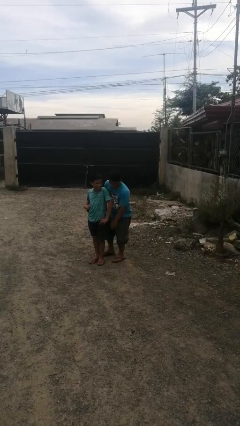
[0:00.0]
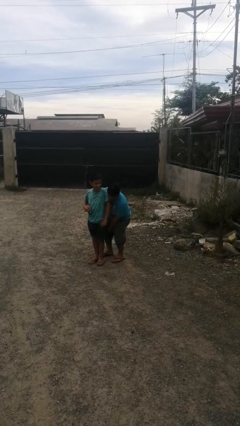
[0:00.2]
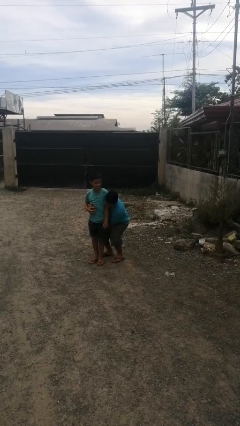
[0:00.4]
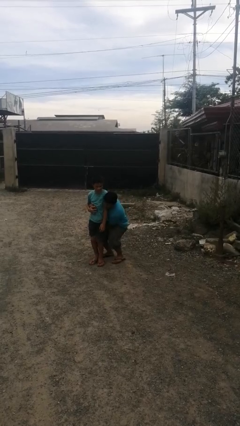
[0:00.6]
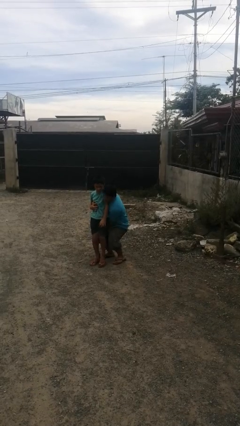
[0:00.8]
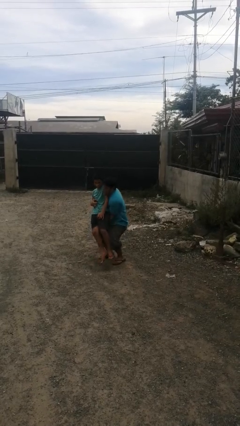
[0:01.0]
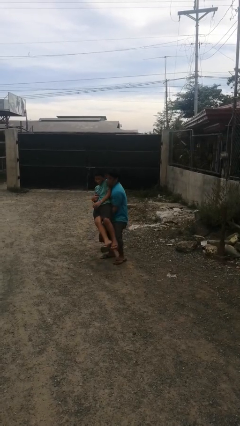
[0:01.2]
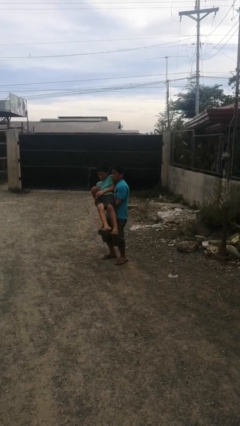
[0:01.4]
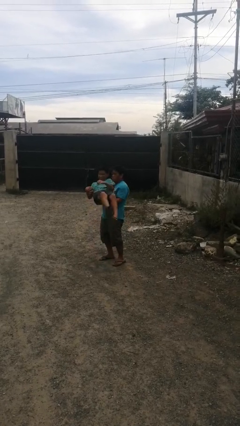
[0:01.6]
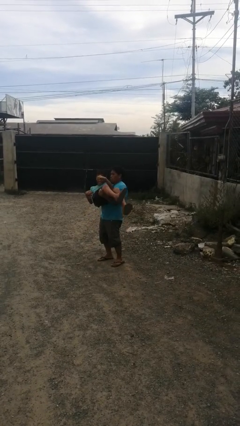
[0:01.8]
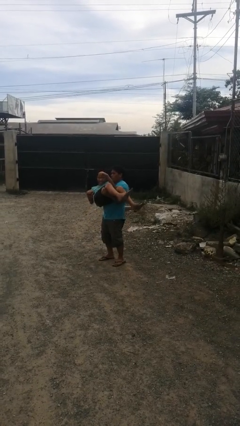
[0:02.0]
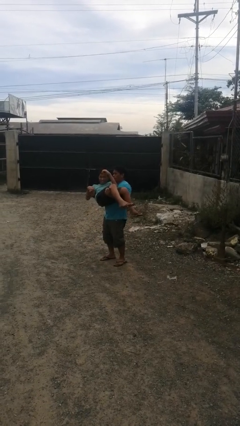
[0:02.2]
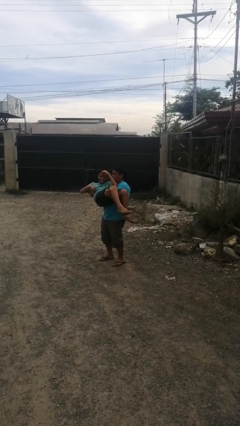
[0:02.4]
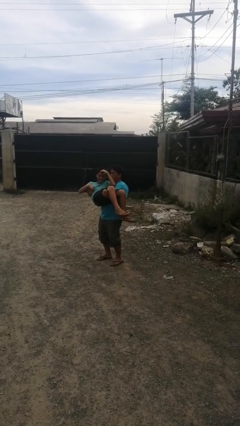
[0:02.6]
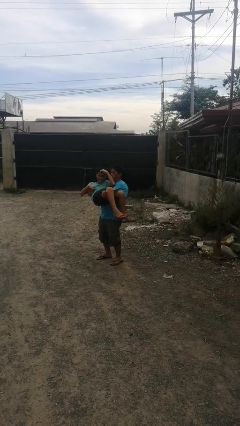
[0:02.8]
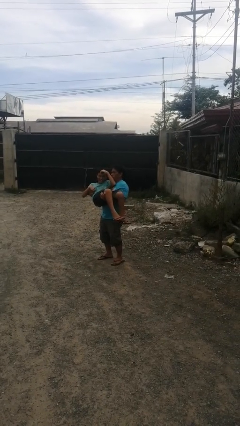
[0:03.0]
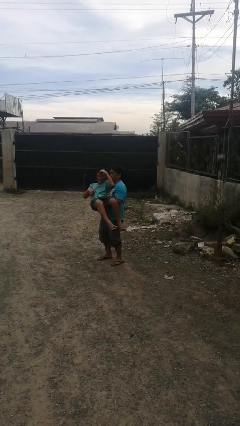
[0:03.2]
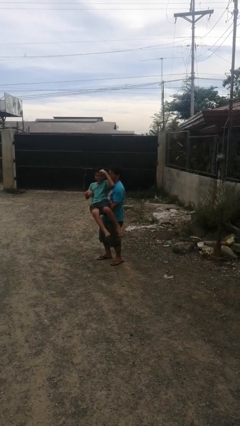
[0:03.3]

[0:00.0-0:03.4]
person picks up person

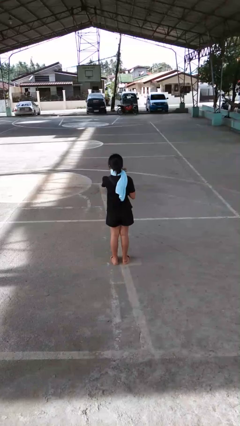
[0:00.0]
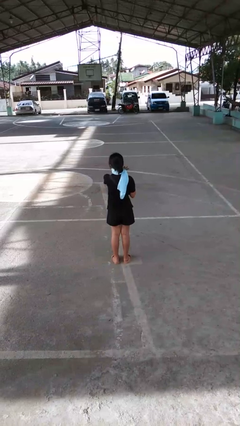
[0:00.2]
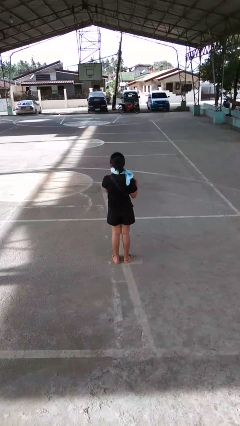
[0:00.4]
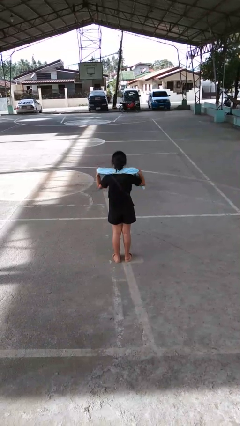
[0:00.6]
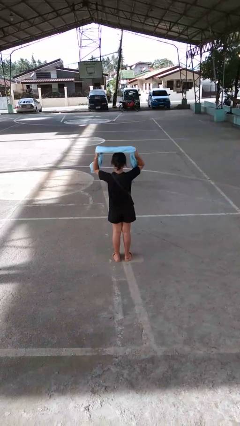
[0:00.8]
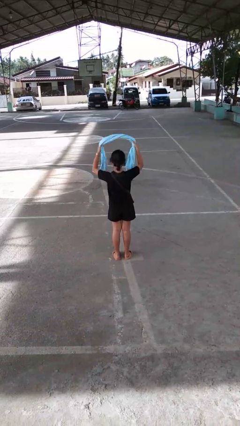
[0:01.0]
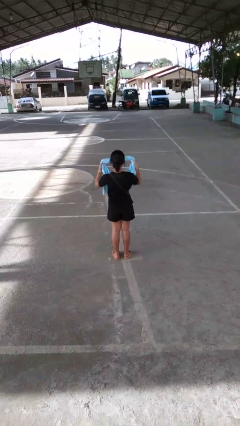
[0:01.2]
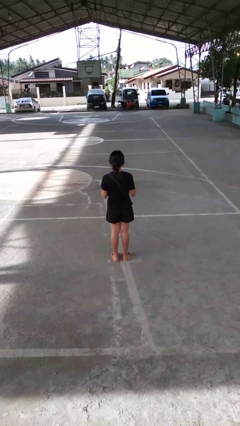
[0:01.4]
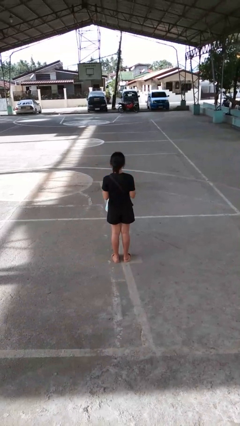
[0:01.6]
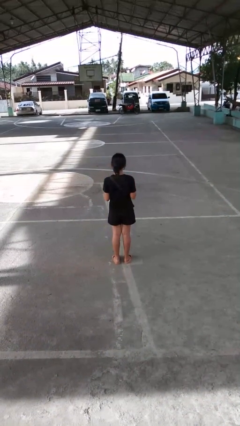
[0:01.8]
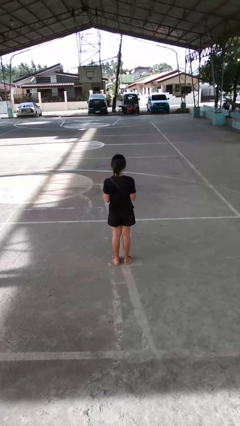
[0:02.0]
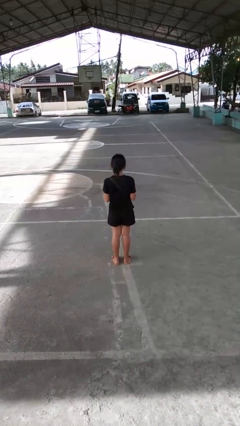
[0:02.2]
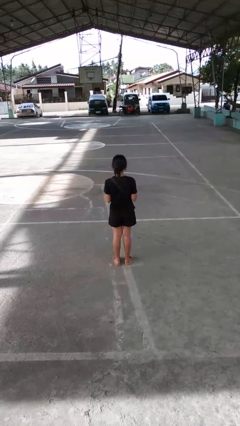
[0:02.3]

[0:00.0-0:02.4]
person takes off scarf

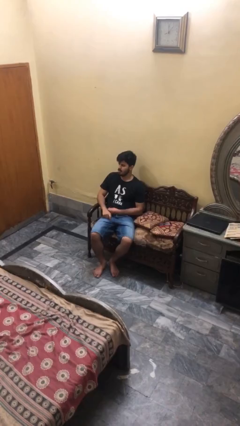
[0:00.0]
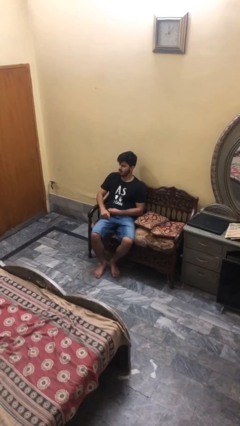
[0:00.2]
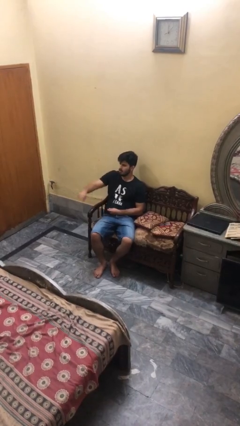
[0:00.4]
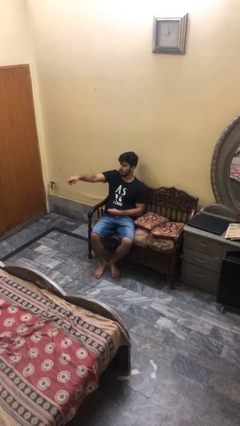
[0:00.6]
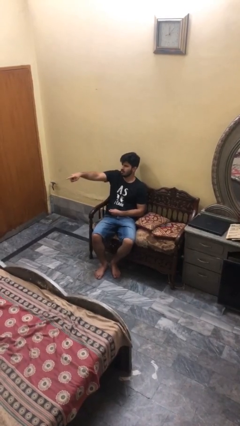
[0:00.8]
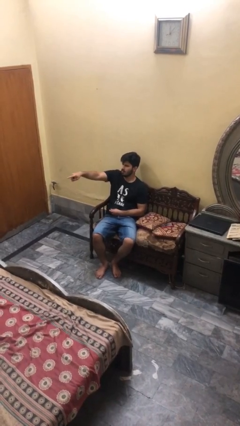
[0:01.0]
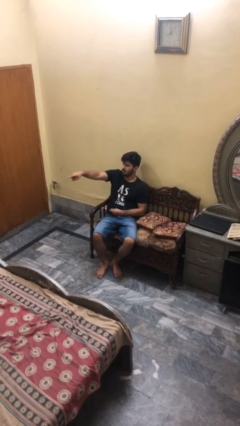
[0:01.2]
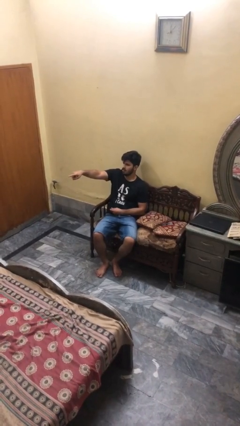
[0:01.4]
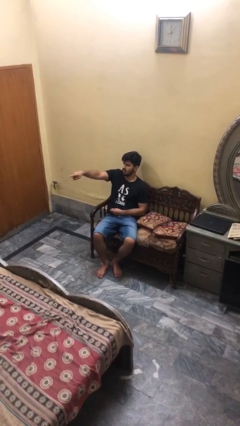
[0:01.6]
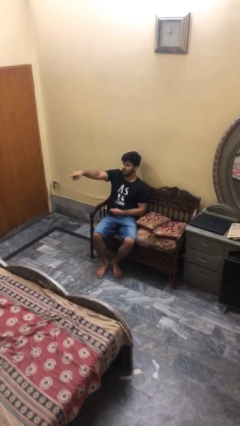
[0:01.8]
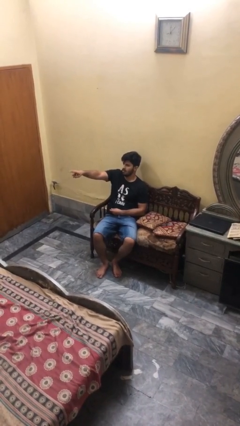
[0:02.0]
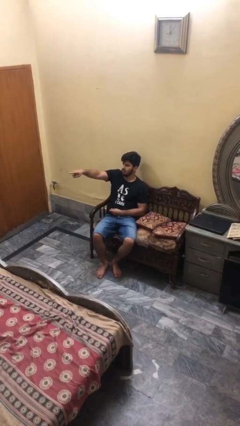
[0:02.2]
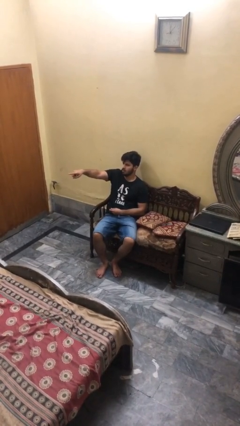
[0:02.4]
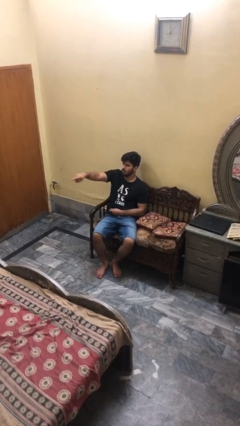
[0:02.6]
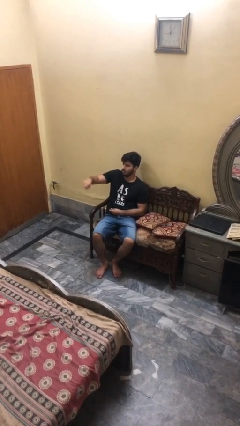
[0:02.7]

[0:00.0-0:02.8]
person points at person

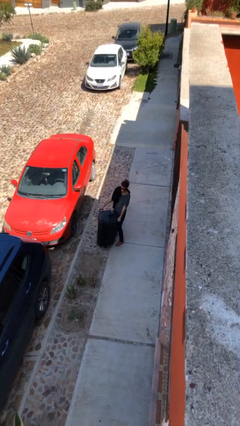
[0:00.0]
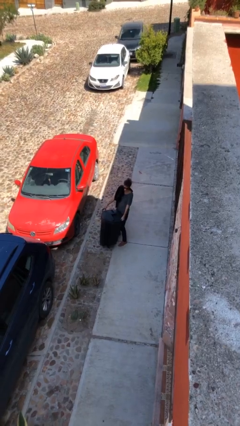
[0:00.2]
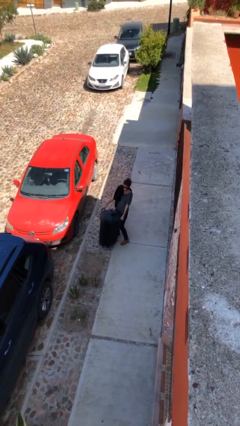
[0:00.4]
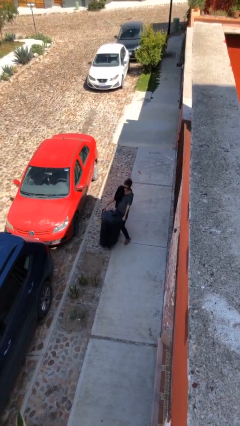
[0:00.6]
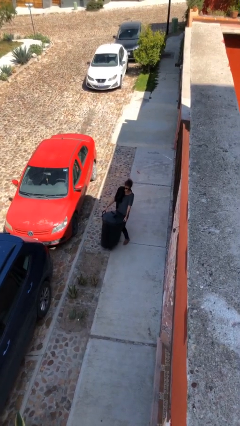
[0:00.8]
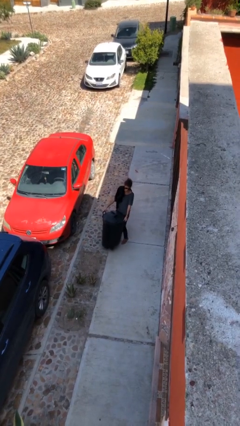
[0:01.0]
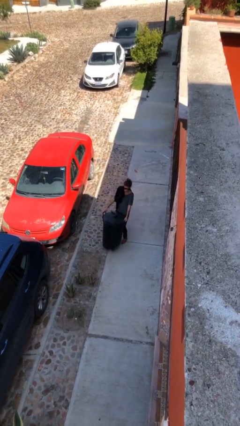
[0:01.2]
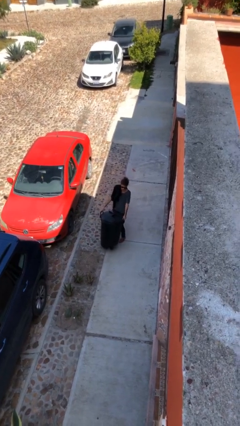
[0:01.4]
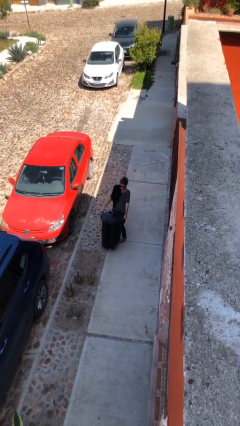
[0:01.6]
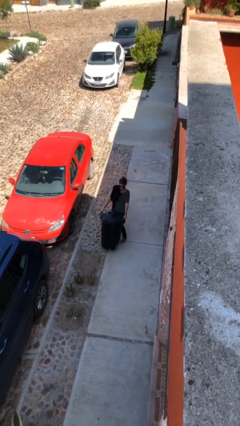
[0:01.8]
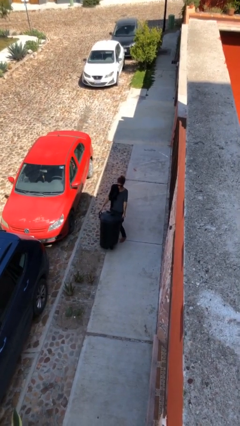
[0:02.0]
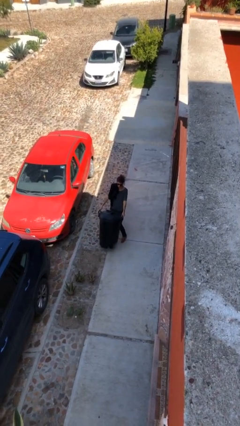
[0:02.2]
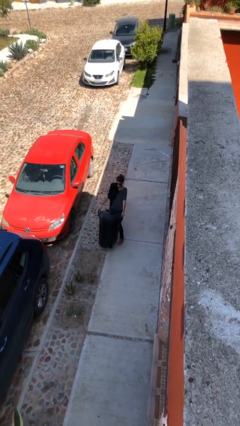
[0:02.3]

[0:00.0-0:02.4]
person carries heavy object

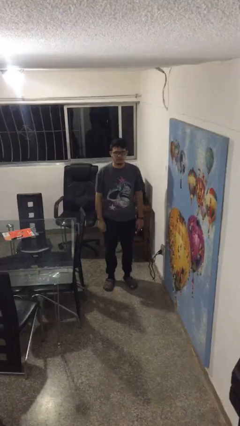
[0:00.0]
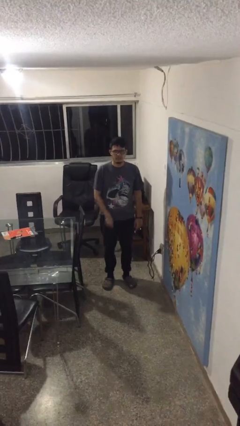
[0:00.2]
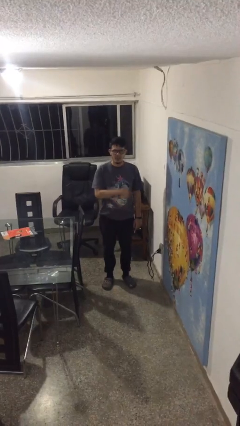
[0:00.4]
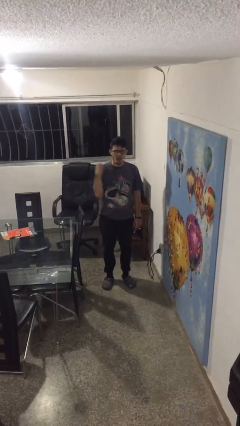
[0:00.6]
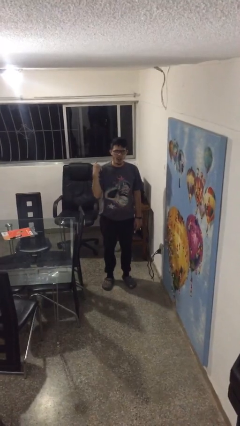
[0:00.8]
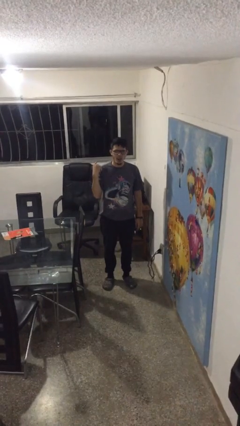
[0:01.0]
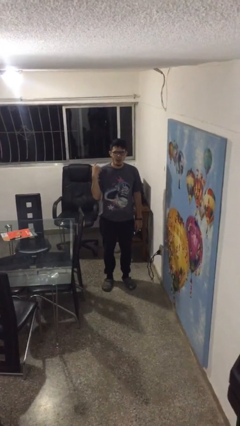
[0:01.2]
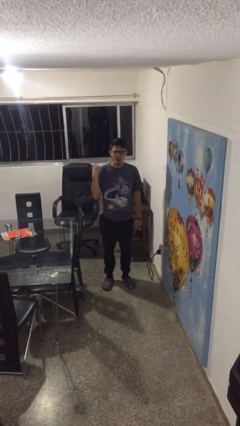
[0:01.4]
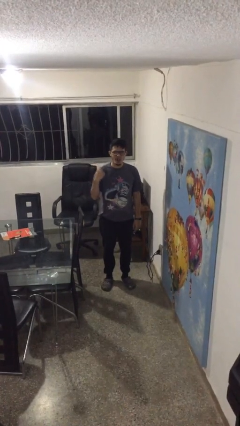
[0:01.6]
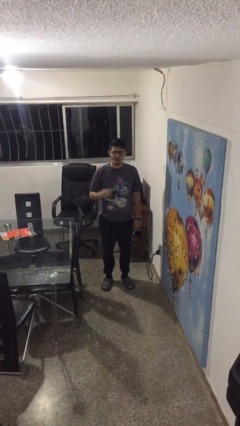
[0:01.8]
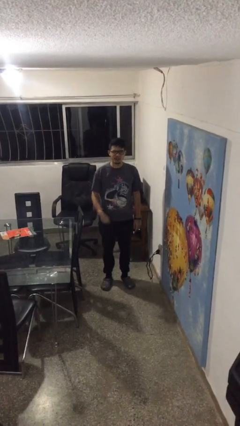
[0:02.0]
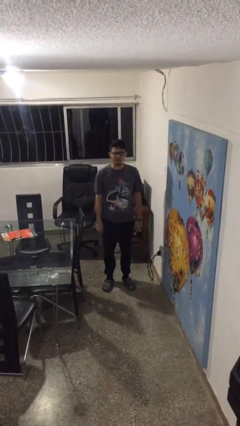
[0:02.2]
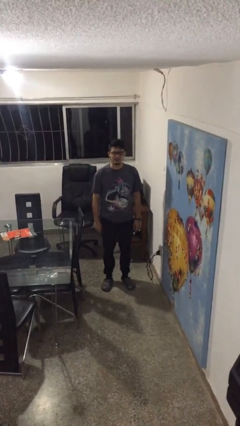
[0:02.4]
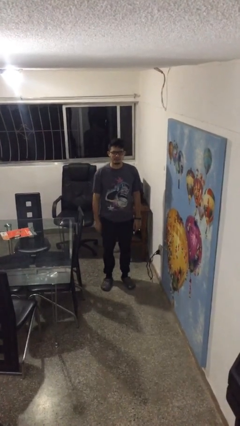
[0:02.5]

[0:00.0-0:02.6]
person gestures cut

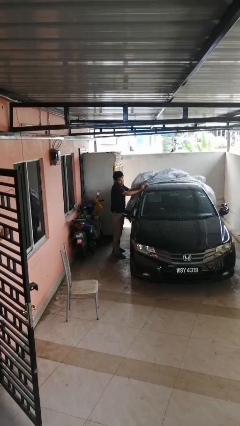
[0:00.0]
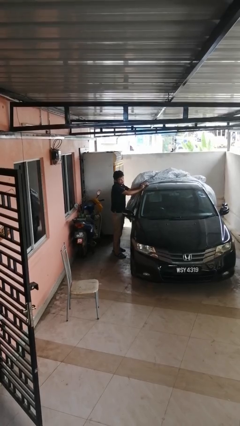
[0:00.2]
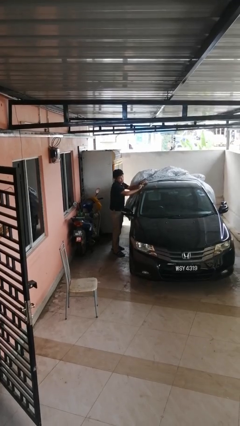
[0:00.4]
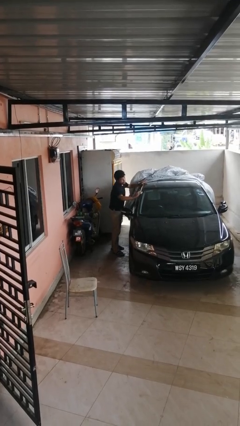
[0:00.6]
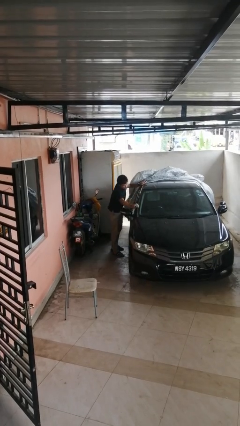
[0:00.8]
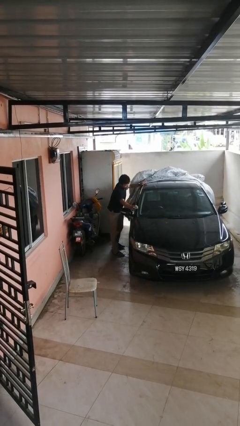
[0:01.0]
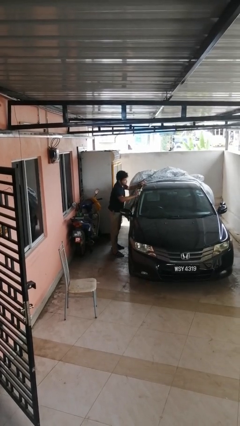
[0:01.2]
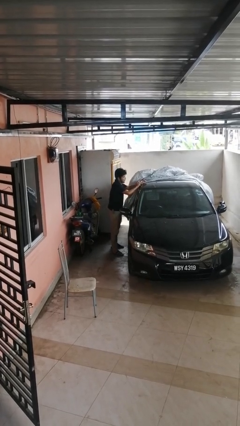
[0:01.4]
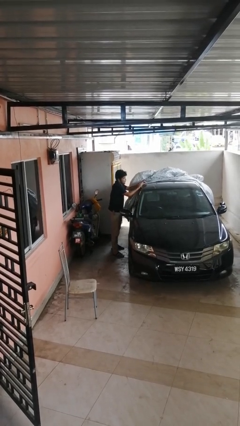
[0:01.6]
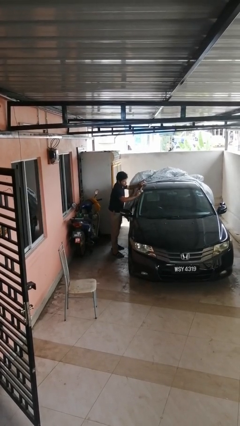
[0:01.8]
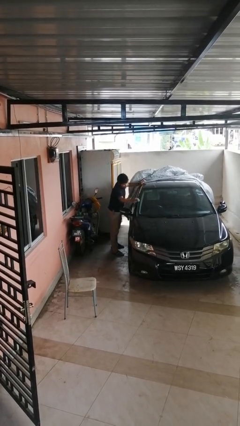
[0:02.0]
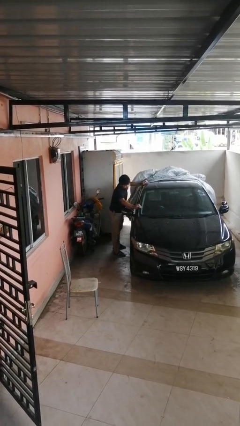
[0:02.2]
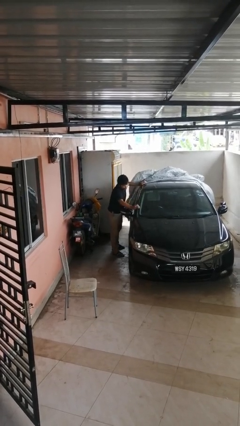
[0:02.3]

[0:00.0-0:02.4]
person polishes car with rag

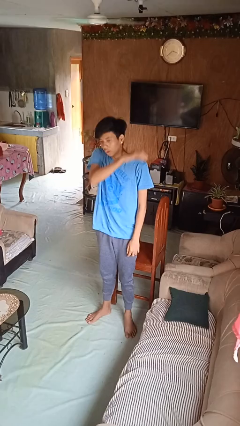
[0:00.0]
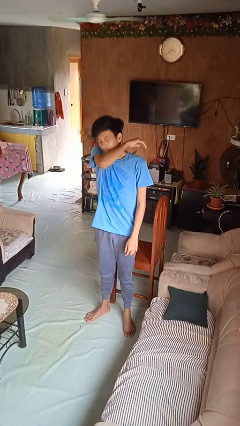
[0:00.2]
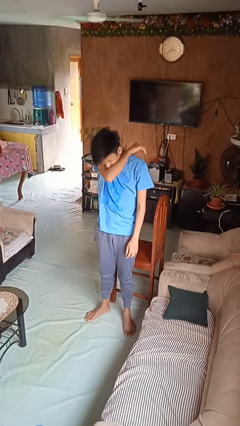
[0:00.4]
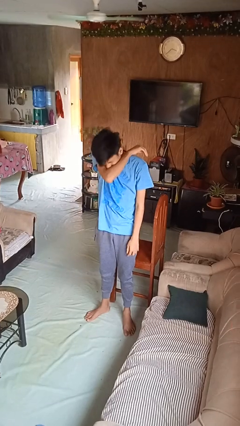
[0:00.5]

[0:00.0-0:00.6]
person sneezes into arm

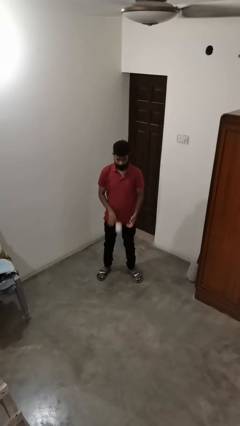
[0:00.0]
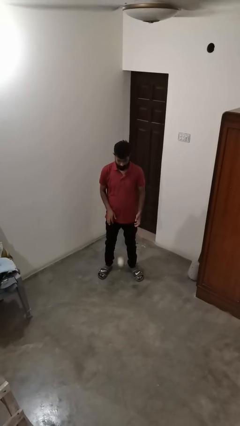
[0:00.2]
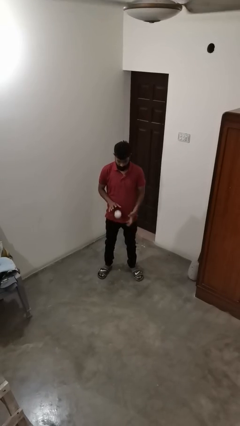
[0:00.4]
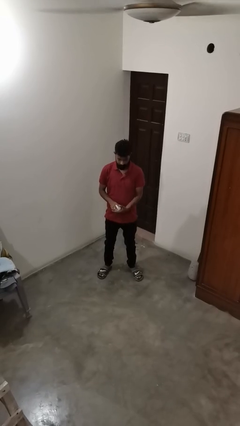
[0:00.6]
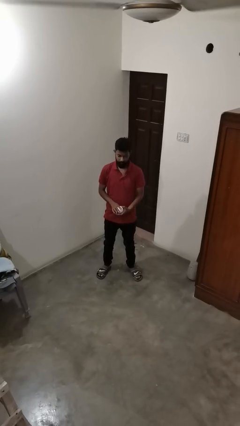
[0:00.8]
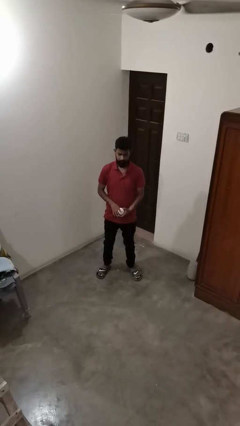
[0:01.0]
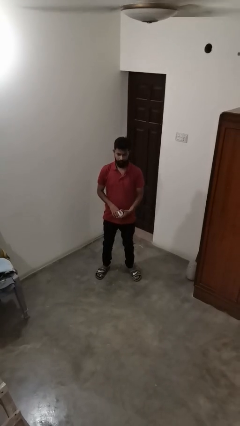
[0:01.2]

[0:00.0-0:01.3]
person bounces ball on floor
